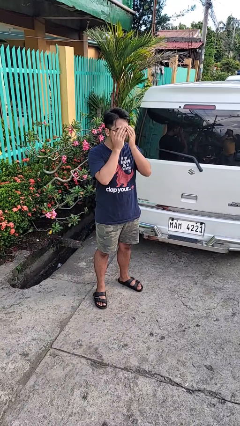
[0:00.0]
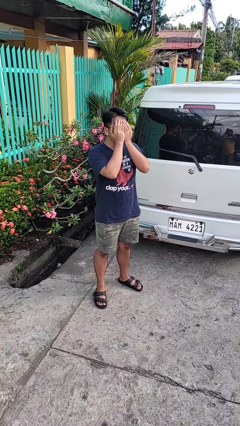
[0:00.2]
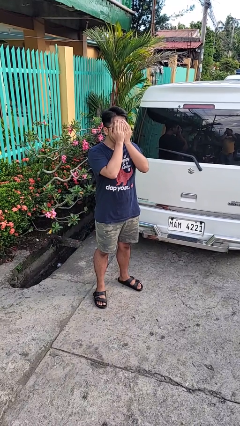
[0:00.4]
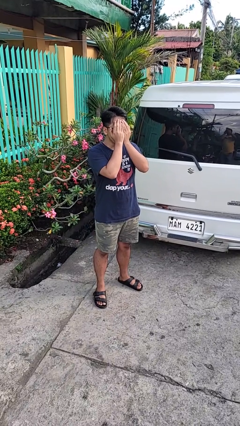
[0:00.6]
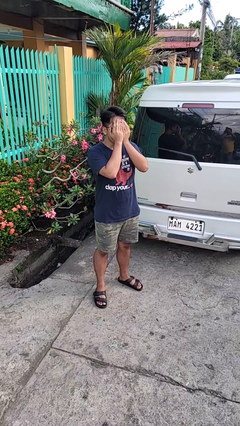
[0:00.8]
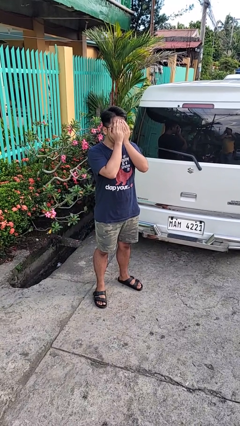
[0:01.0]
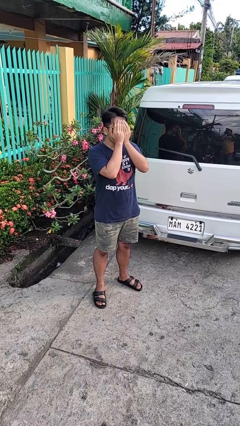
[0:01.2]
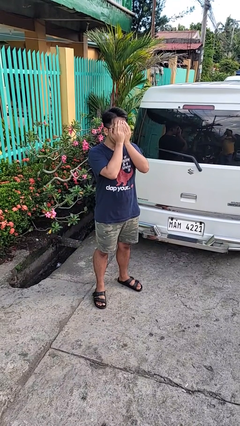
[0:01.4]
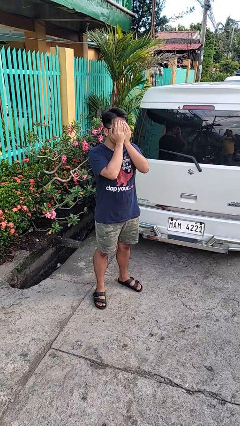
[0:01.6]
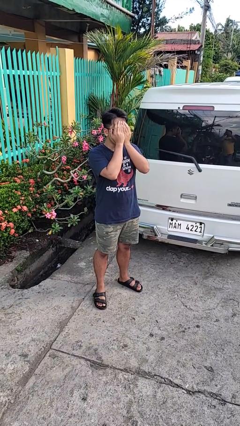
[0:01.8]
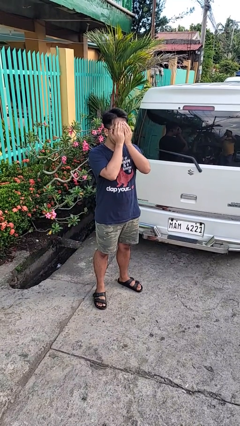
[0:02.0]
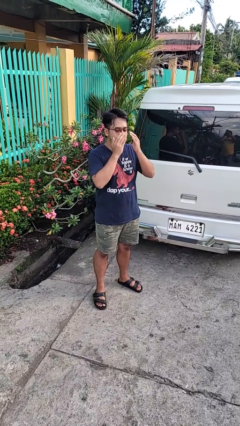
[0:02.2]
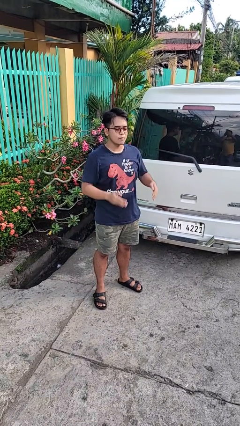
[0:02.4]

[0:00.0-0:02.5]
person covers face with hands

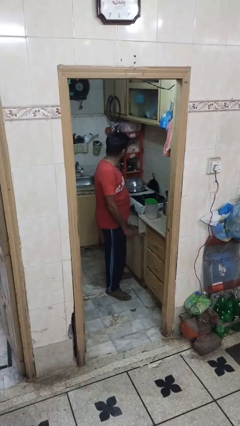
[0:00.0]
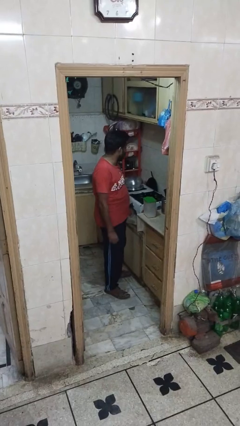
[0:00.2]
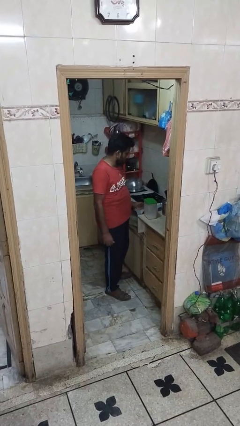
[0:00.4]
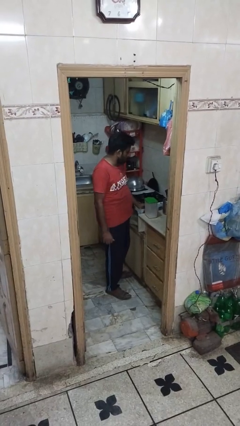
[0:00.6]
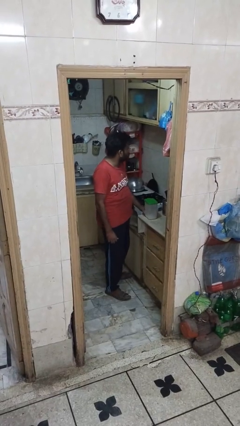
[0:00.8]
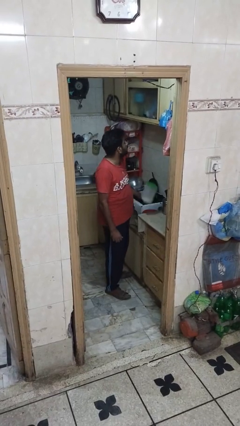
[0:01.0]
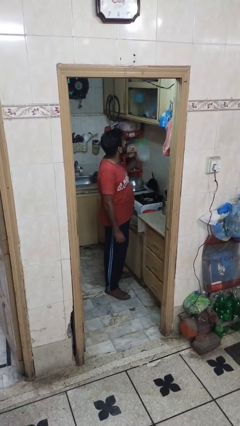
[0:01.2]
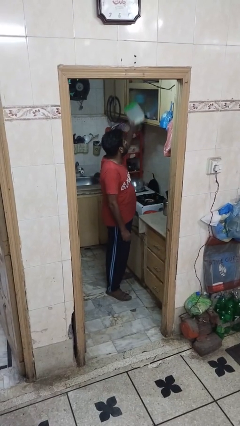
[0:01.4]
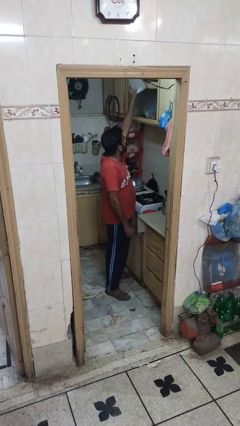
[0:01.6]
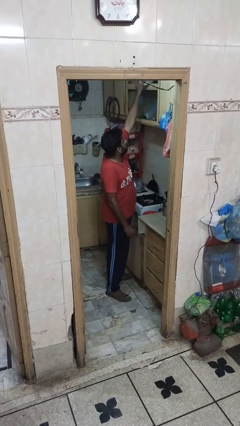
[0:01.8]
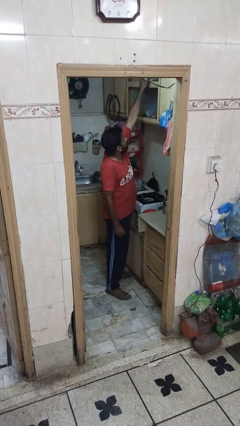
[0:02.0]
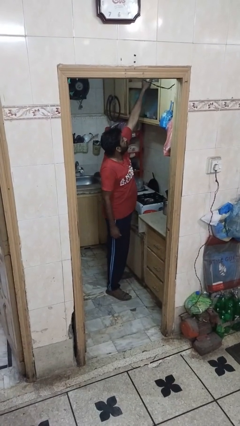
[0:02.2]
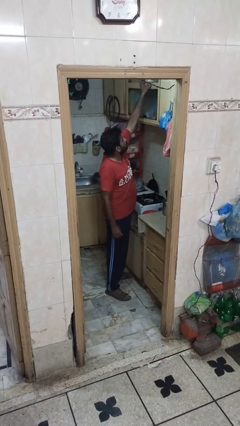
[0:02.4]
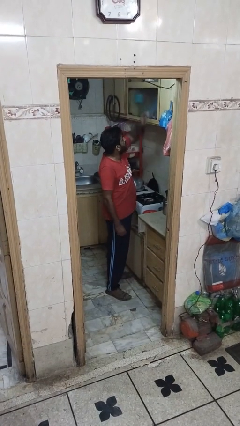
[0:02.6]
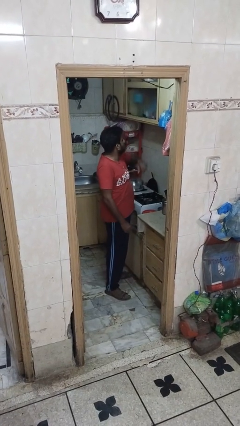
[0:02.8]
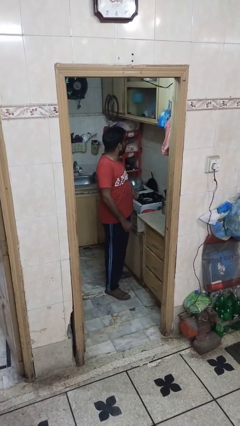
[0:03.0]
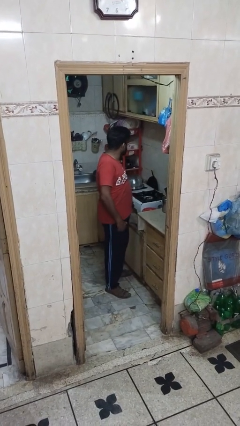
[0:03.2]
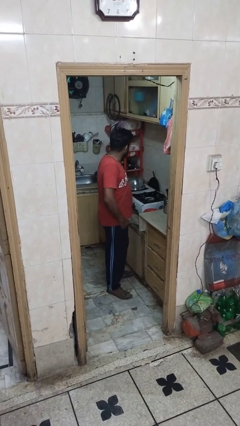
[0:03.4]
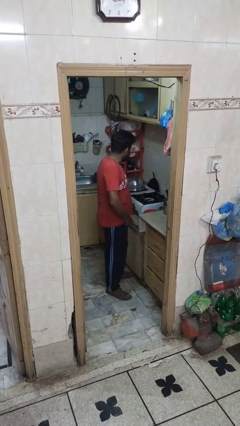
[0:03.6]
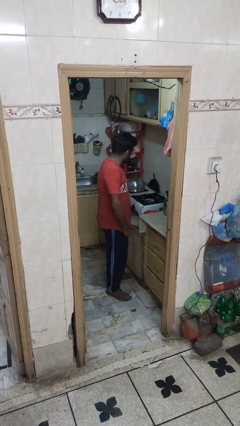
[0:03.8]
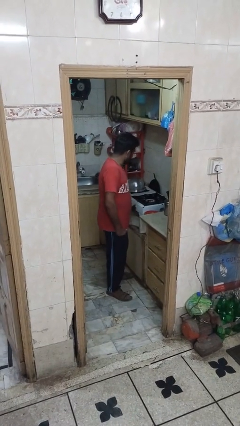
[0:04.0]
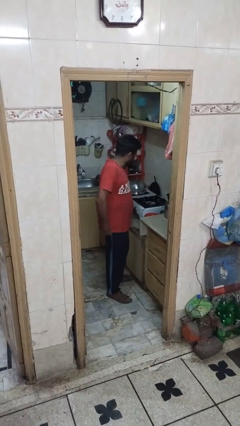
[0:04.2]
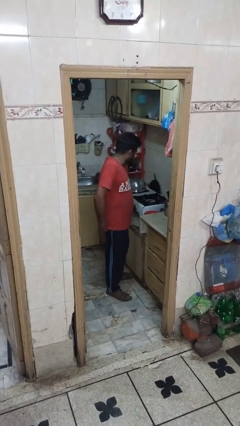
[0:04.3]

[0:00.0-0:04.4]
person picks up object from shelf

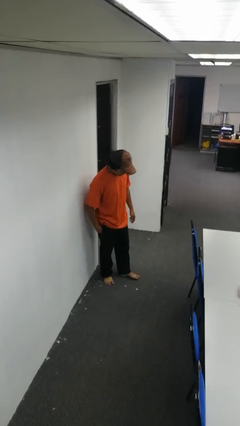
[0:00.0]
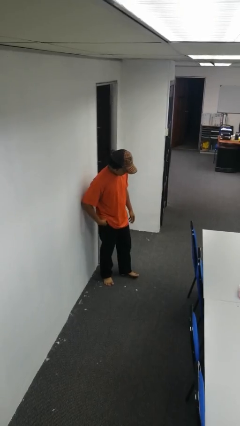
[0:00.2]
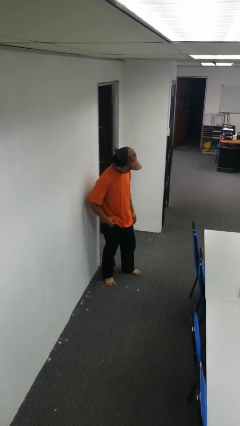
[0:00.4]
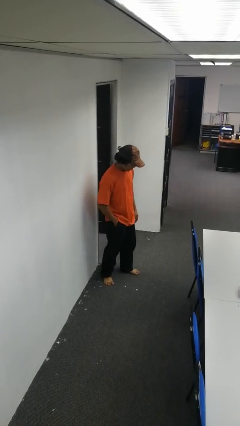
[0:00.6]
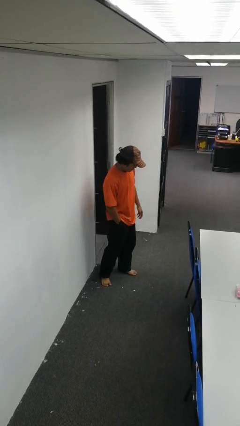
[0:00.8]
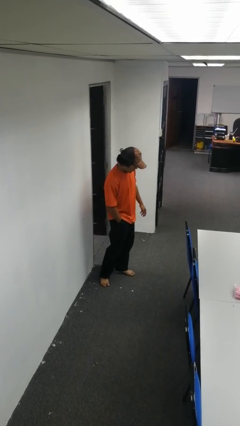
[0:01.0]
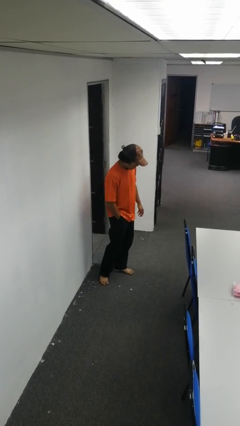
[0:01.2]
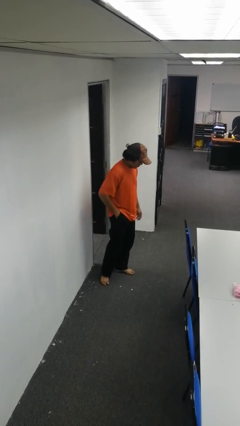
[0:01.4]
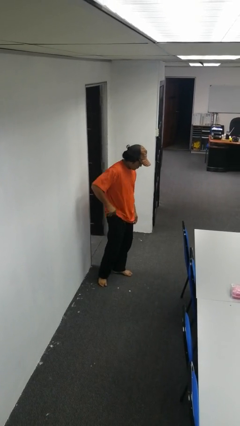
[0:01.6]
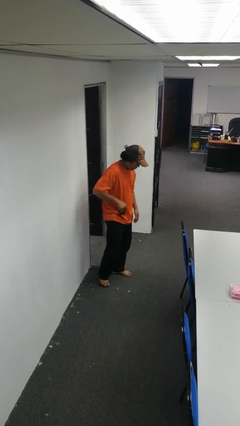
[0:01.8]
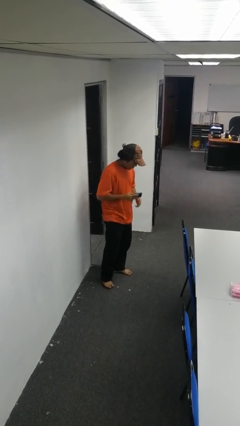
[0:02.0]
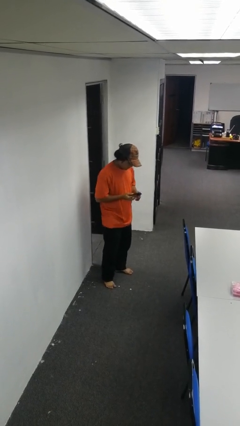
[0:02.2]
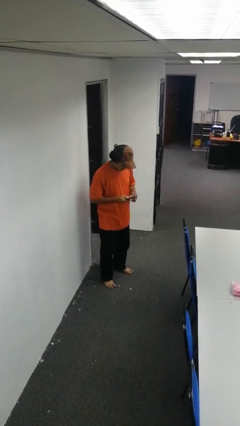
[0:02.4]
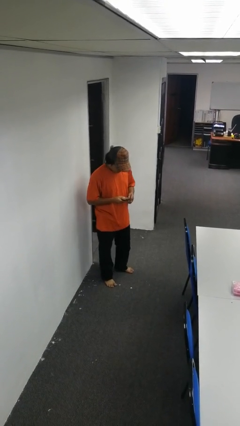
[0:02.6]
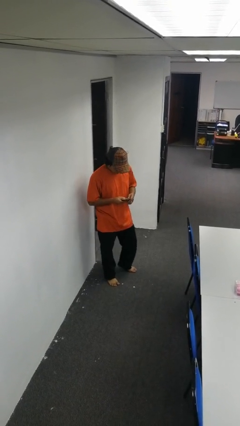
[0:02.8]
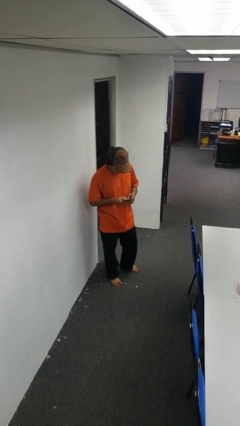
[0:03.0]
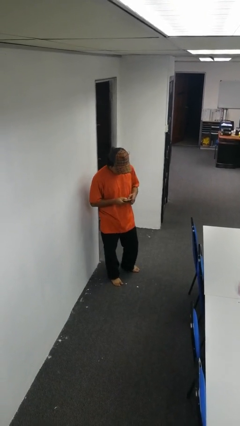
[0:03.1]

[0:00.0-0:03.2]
person takes phone from pocket

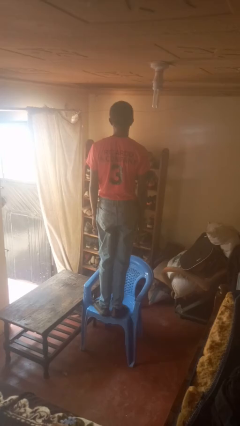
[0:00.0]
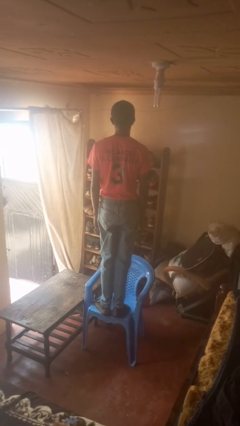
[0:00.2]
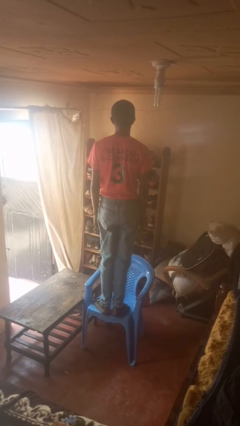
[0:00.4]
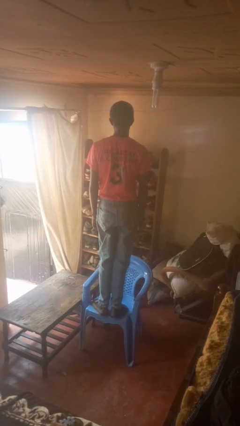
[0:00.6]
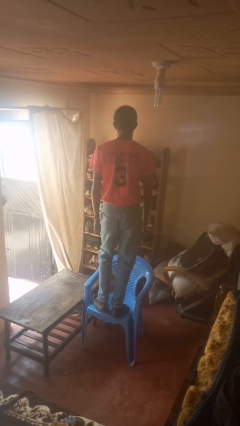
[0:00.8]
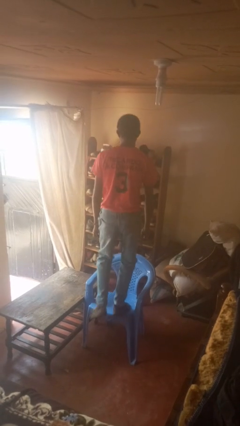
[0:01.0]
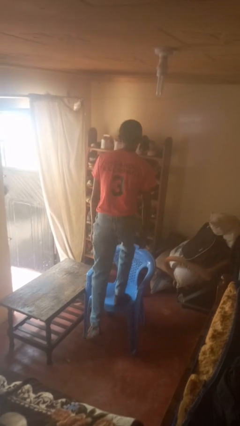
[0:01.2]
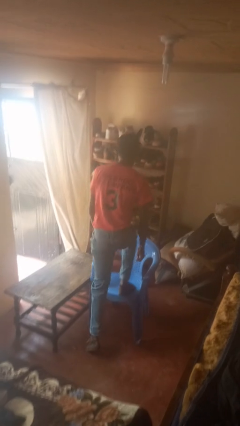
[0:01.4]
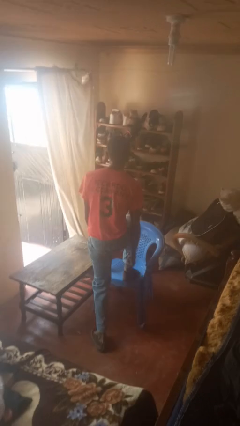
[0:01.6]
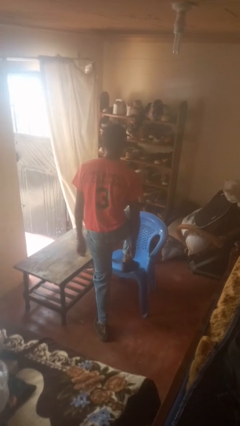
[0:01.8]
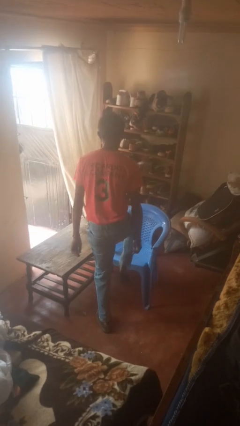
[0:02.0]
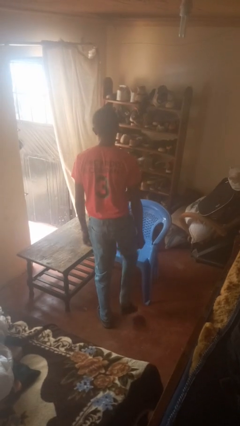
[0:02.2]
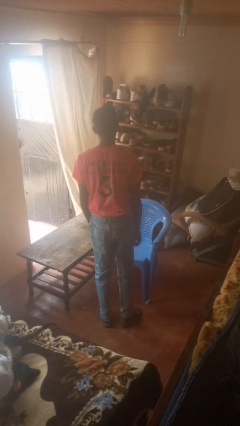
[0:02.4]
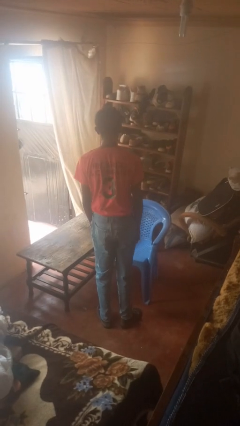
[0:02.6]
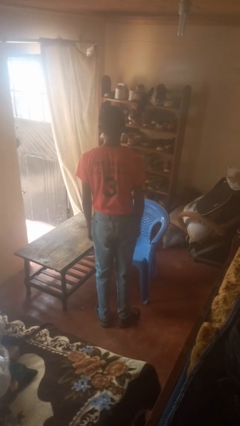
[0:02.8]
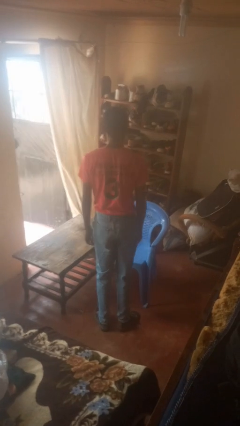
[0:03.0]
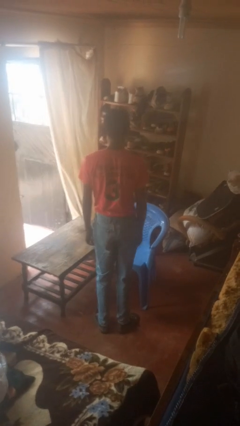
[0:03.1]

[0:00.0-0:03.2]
person climbs off chair

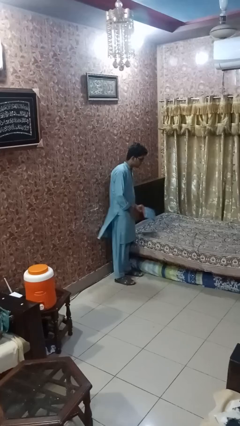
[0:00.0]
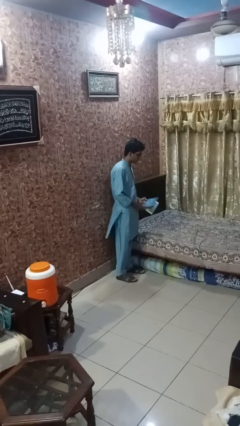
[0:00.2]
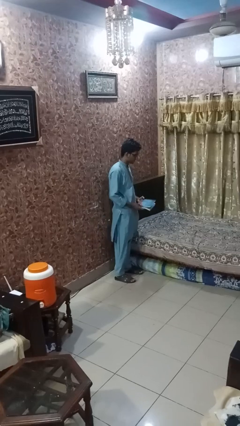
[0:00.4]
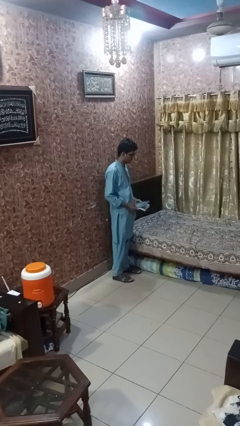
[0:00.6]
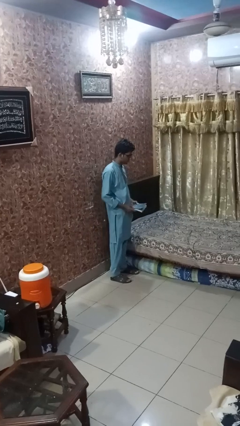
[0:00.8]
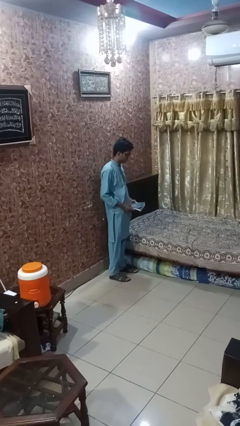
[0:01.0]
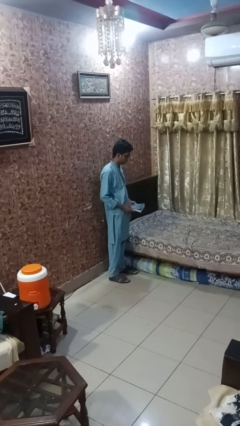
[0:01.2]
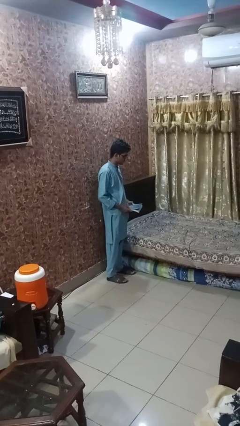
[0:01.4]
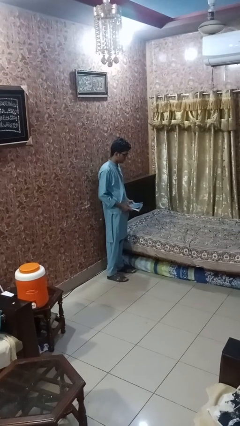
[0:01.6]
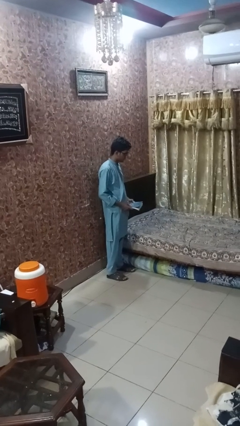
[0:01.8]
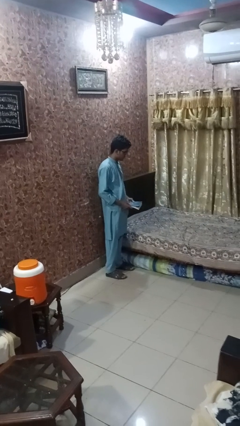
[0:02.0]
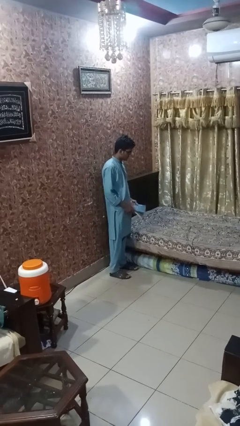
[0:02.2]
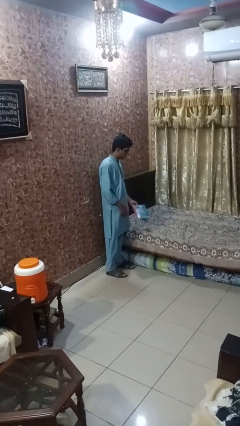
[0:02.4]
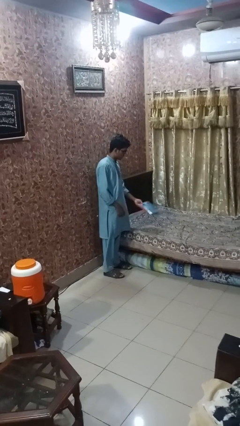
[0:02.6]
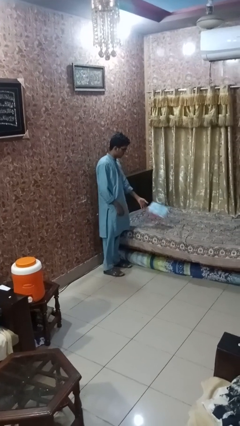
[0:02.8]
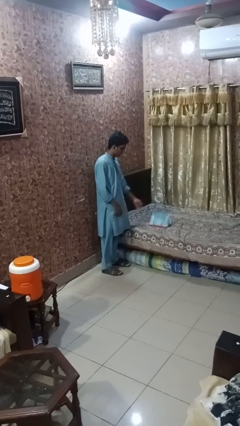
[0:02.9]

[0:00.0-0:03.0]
person picks up object from bed

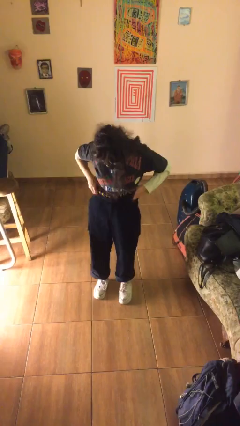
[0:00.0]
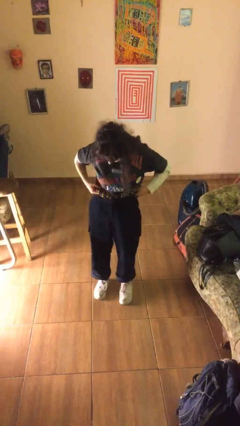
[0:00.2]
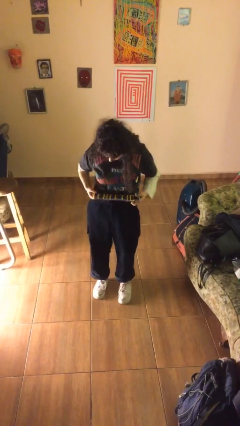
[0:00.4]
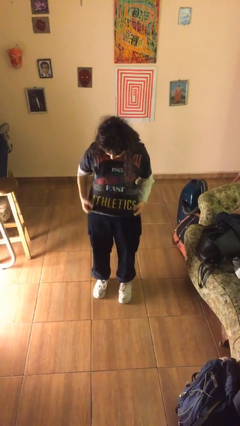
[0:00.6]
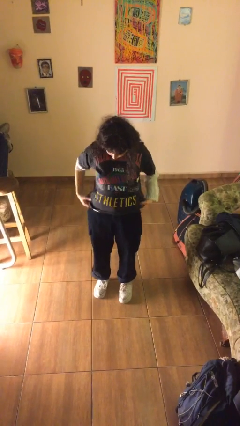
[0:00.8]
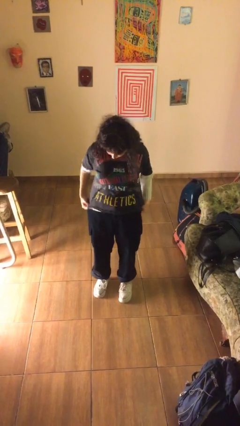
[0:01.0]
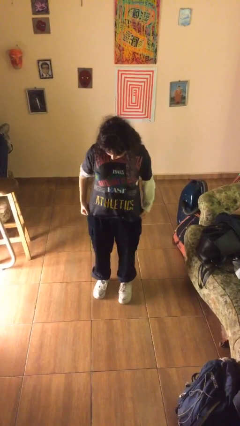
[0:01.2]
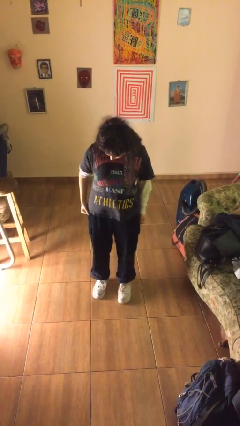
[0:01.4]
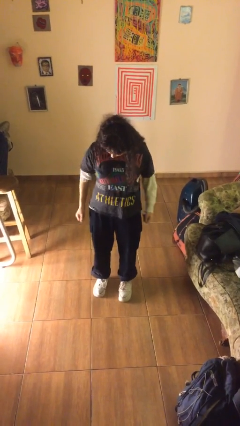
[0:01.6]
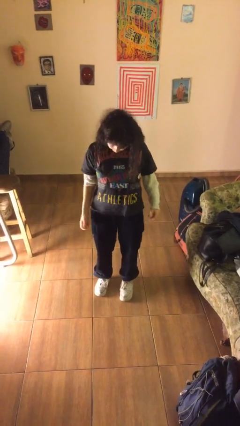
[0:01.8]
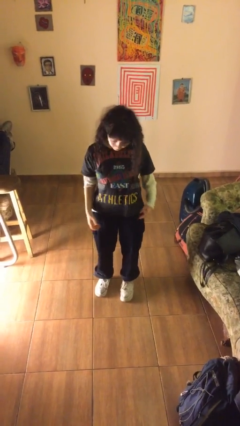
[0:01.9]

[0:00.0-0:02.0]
person untucks shirt
